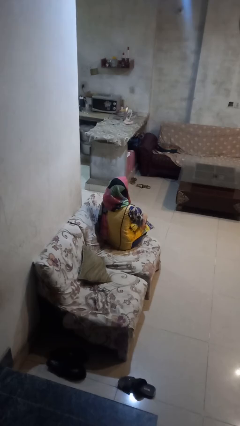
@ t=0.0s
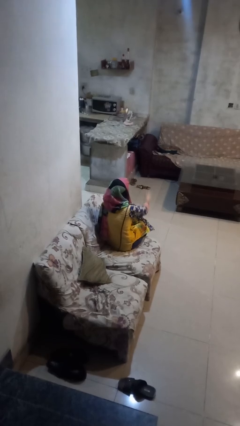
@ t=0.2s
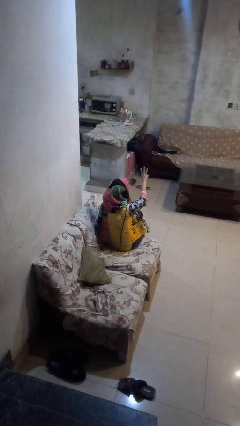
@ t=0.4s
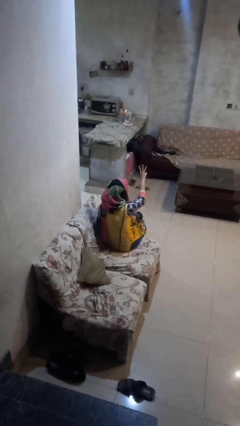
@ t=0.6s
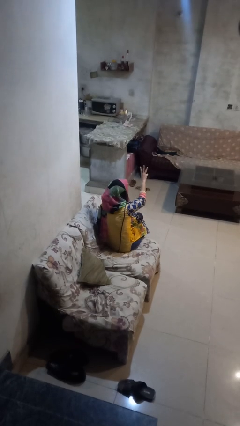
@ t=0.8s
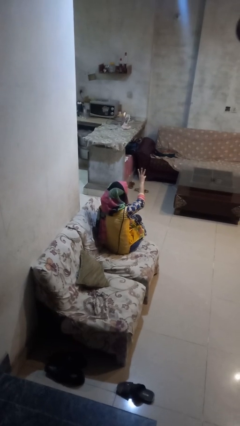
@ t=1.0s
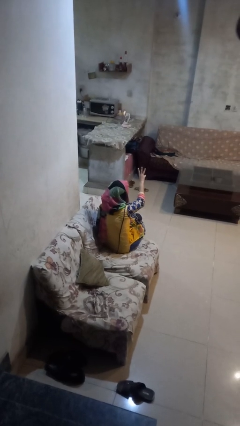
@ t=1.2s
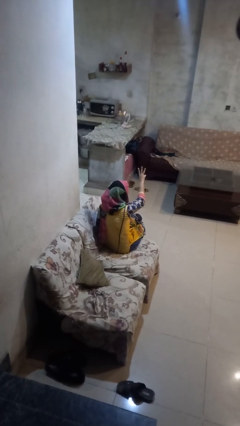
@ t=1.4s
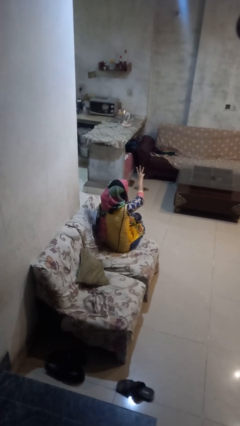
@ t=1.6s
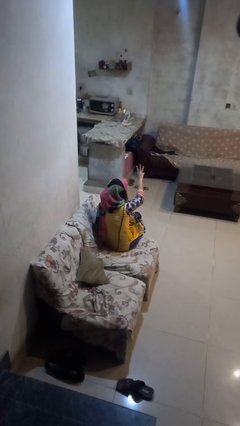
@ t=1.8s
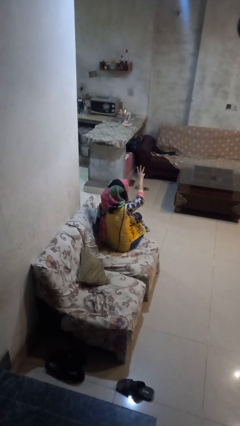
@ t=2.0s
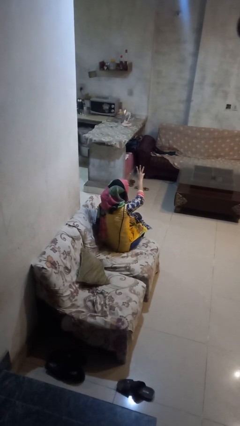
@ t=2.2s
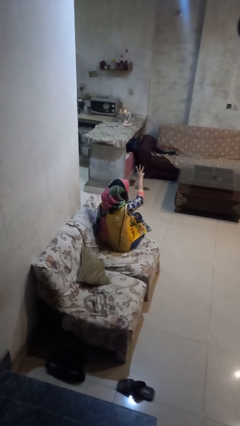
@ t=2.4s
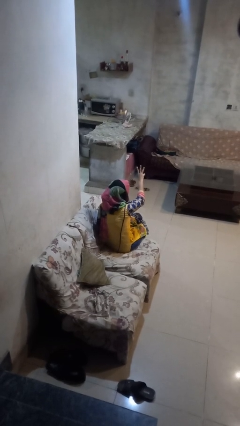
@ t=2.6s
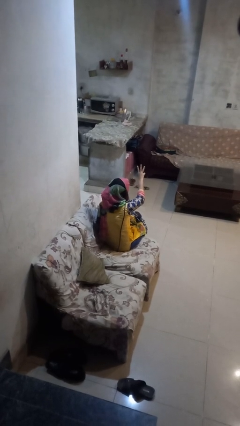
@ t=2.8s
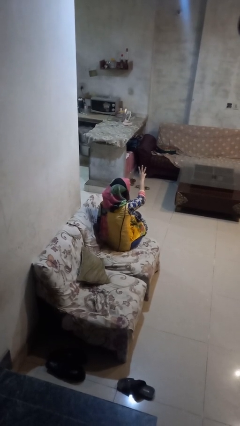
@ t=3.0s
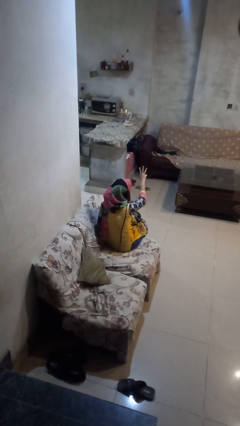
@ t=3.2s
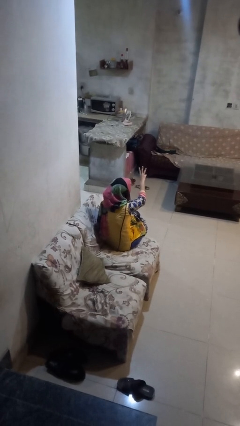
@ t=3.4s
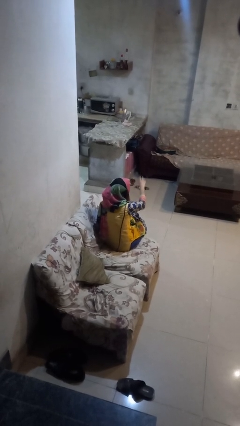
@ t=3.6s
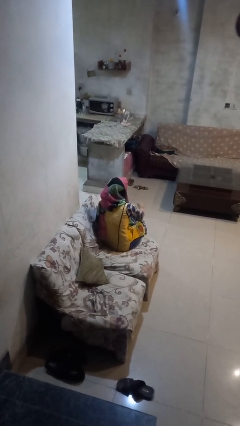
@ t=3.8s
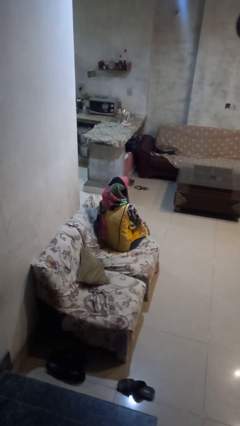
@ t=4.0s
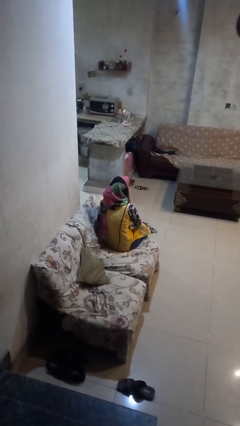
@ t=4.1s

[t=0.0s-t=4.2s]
person gestures number three

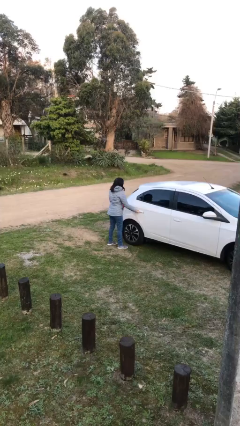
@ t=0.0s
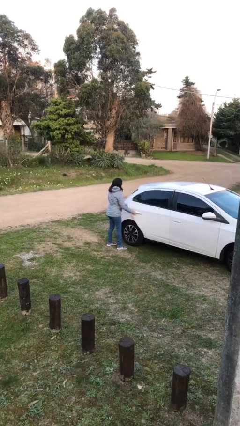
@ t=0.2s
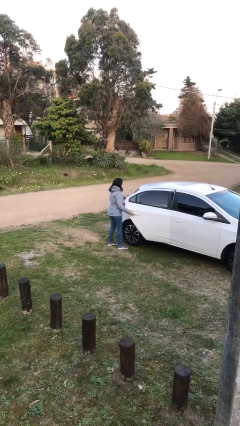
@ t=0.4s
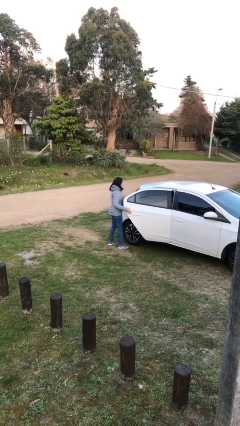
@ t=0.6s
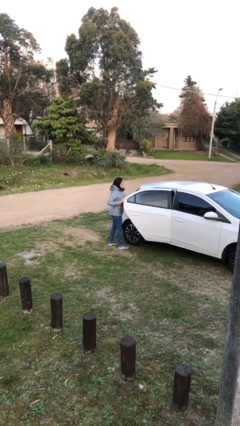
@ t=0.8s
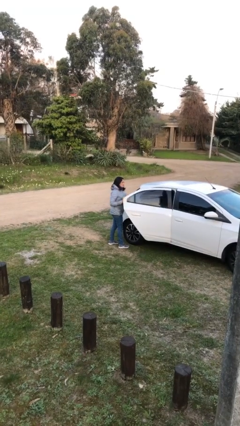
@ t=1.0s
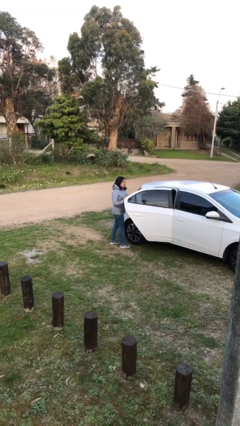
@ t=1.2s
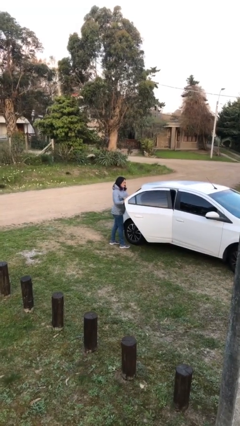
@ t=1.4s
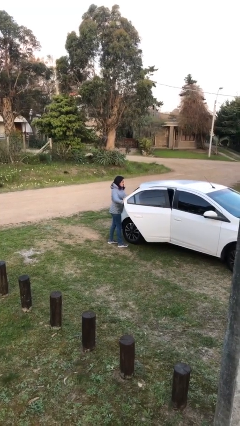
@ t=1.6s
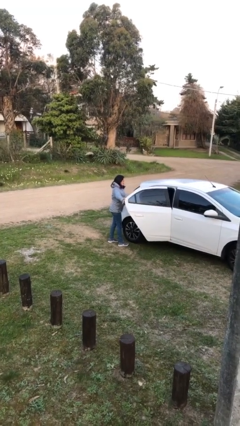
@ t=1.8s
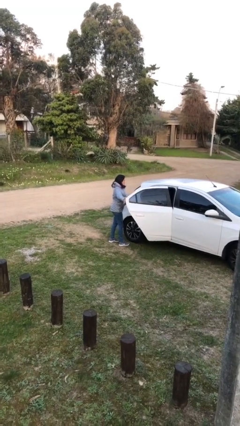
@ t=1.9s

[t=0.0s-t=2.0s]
person opens car door

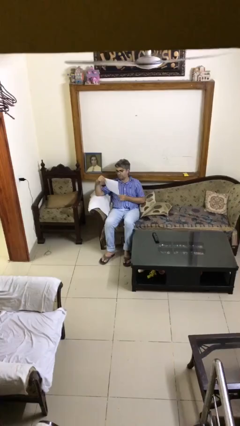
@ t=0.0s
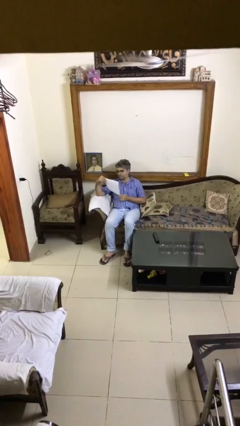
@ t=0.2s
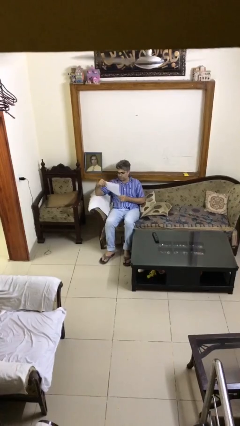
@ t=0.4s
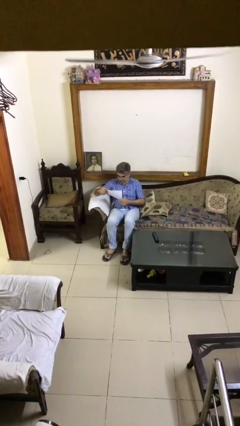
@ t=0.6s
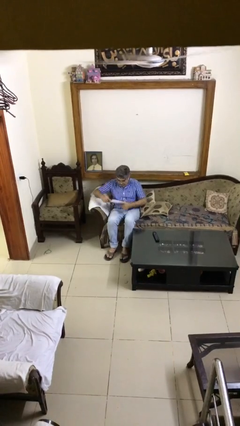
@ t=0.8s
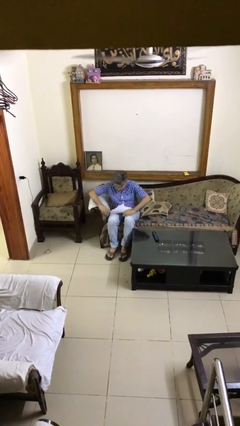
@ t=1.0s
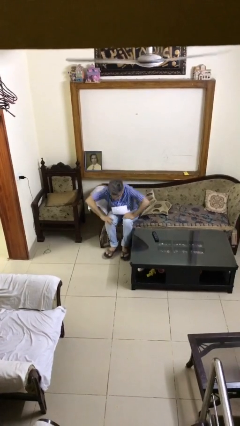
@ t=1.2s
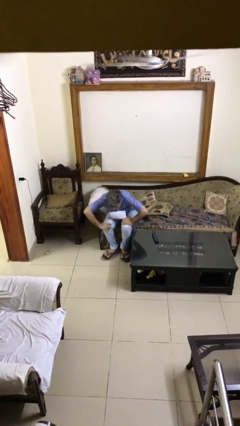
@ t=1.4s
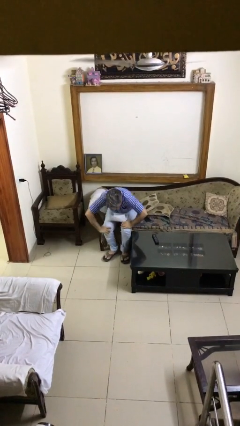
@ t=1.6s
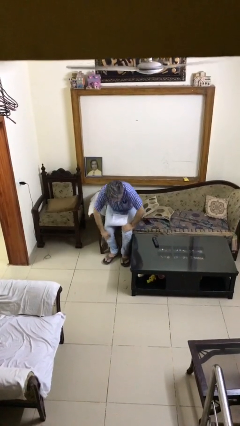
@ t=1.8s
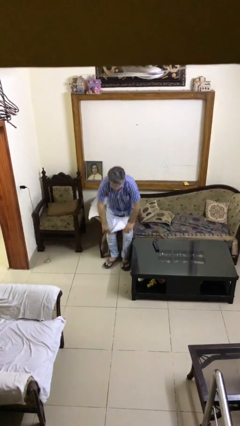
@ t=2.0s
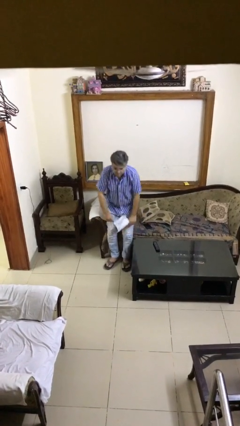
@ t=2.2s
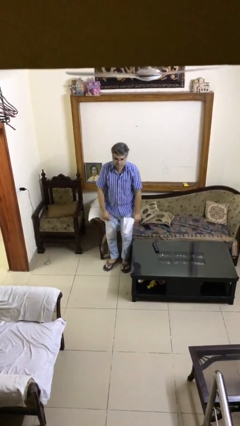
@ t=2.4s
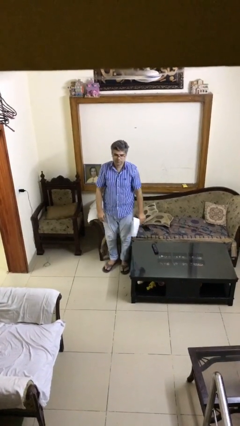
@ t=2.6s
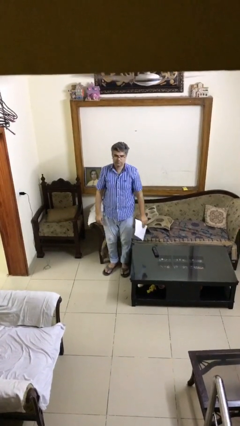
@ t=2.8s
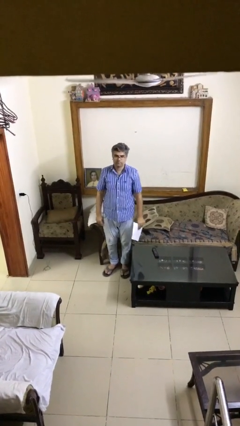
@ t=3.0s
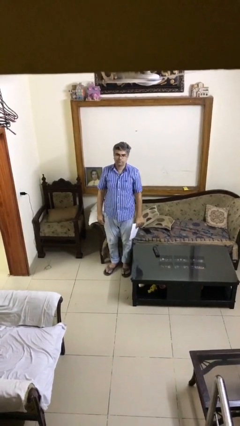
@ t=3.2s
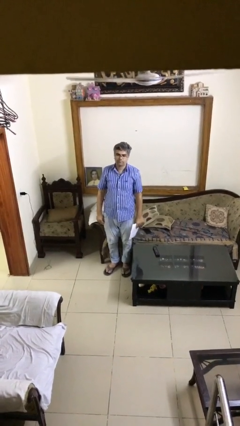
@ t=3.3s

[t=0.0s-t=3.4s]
person stands up

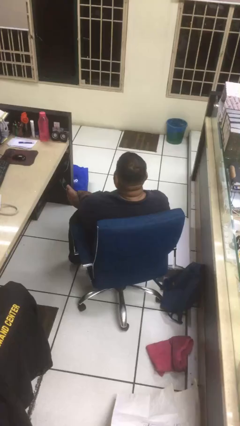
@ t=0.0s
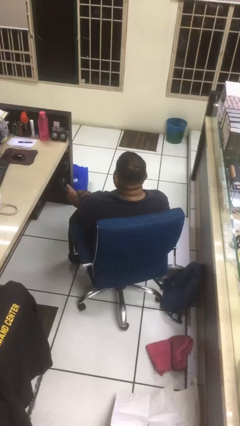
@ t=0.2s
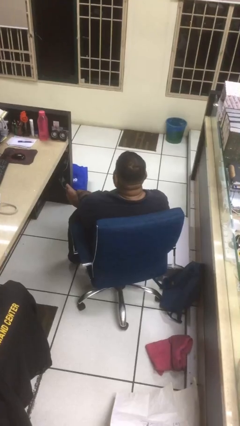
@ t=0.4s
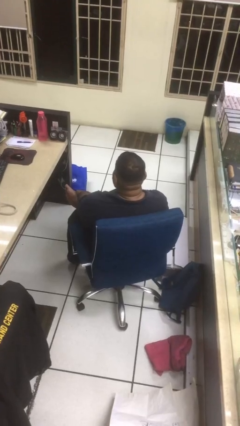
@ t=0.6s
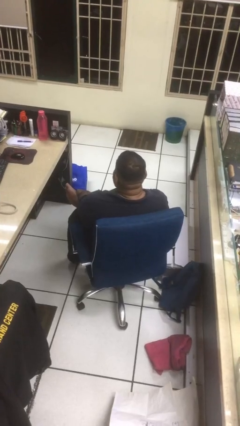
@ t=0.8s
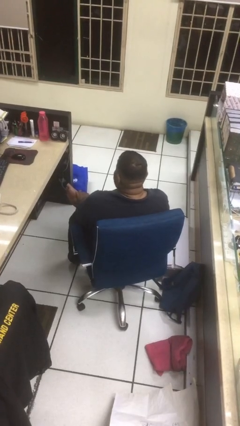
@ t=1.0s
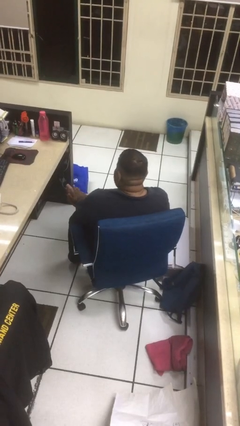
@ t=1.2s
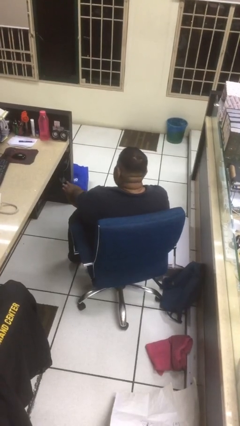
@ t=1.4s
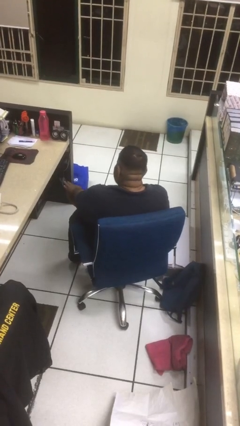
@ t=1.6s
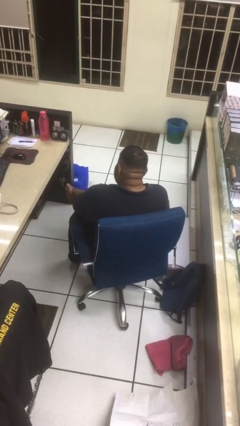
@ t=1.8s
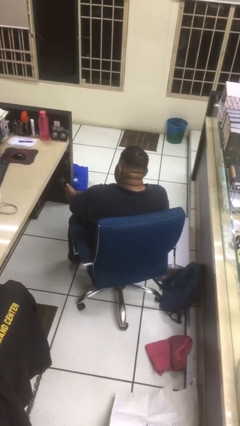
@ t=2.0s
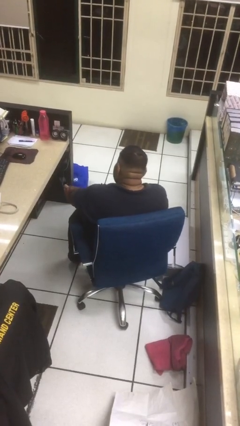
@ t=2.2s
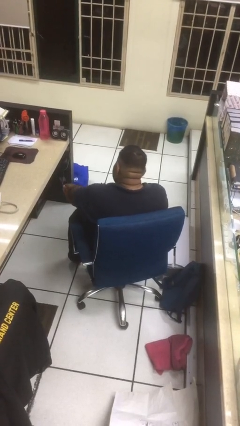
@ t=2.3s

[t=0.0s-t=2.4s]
person rubs foot

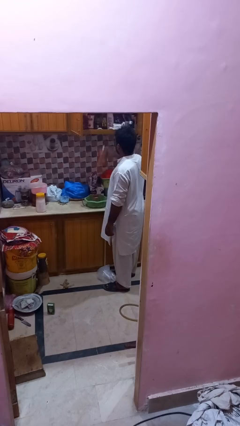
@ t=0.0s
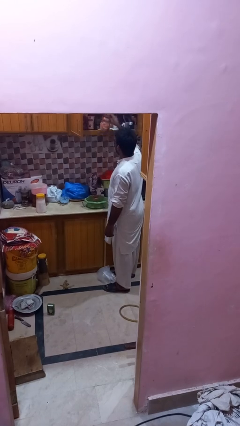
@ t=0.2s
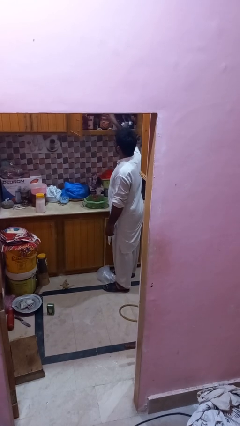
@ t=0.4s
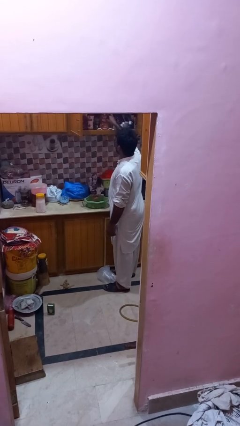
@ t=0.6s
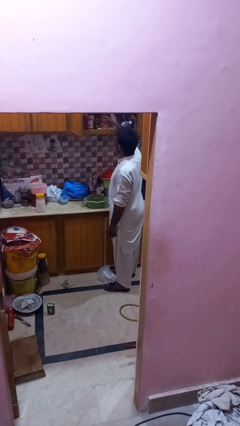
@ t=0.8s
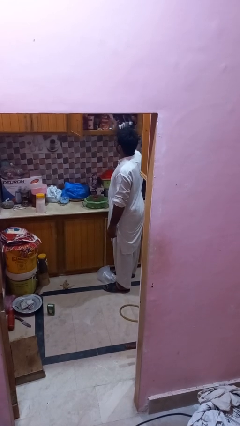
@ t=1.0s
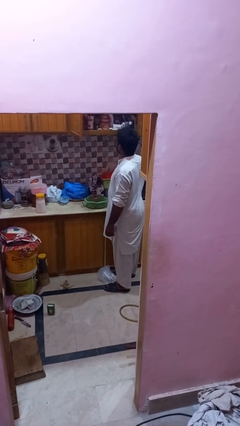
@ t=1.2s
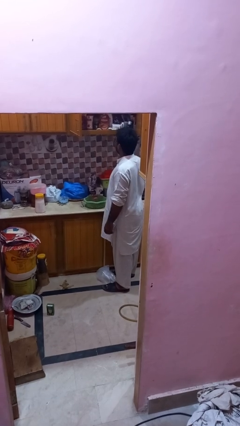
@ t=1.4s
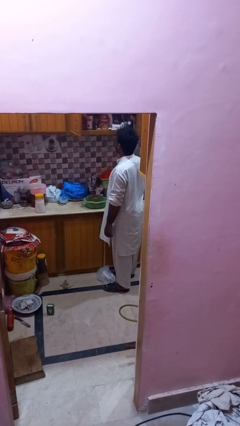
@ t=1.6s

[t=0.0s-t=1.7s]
person loads groceries into cabinet

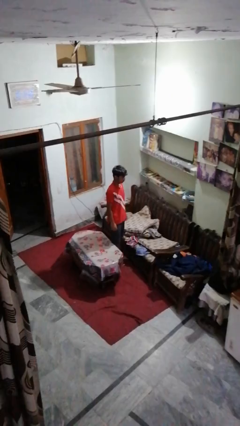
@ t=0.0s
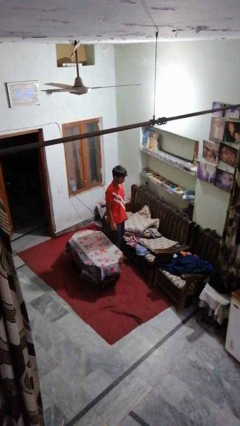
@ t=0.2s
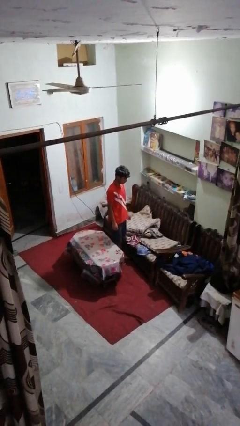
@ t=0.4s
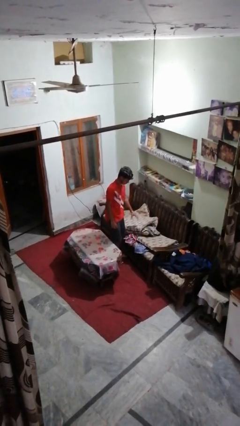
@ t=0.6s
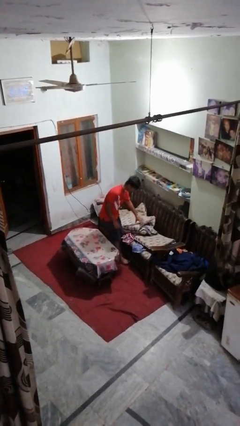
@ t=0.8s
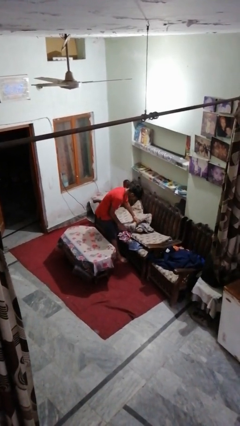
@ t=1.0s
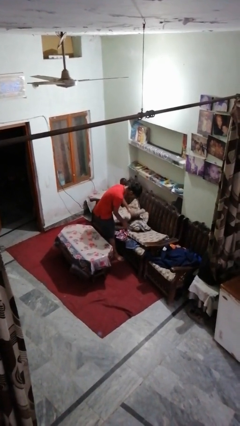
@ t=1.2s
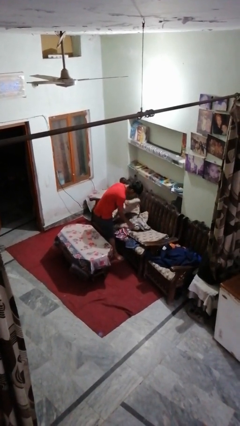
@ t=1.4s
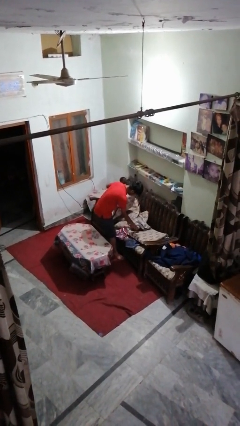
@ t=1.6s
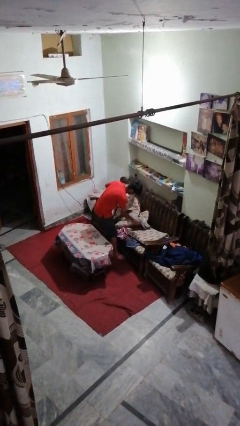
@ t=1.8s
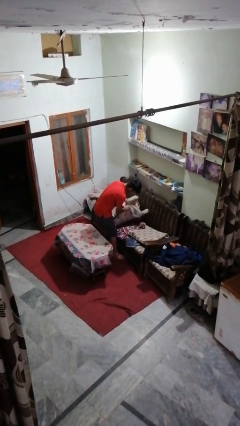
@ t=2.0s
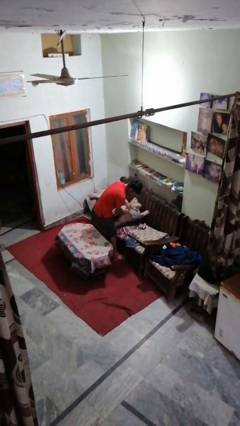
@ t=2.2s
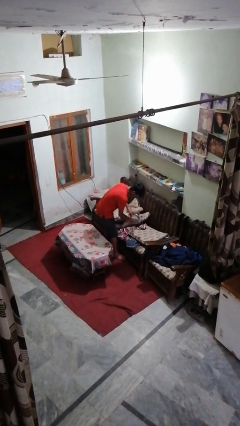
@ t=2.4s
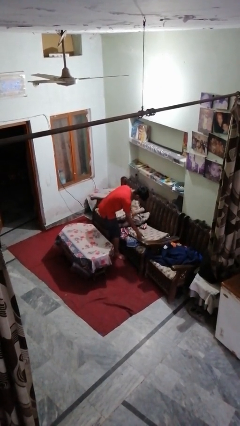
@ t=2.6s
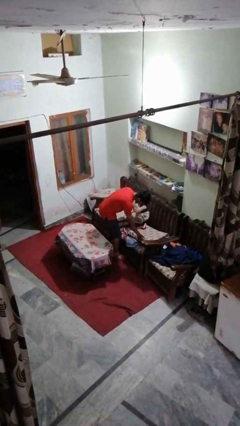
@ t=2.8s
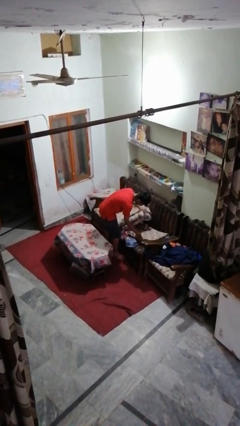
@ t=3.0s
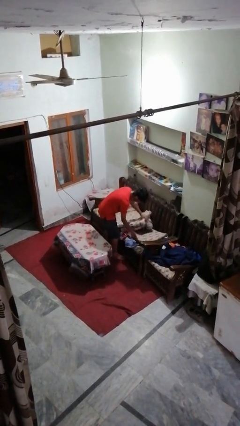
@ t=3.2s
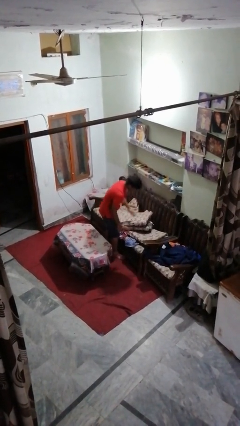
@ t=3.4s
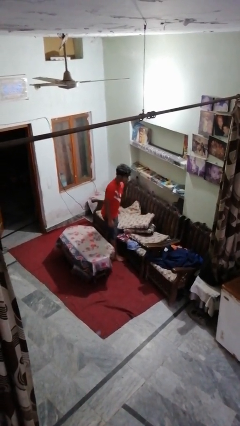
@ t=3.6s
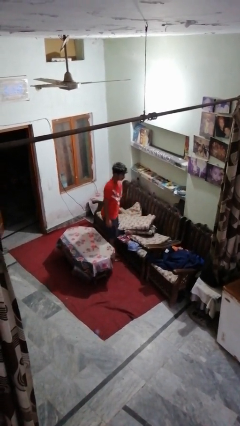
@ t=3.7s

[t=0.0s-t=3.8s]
person searches in couch
